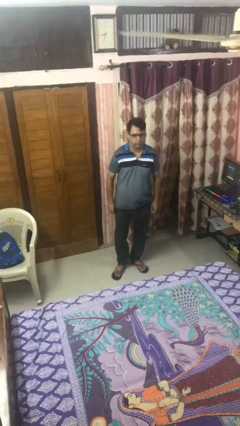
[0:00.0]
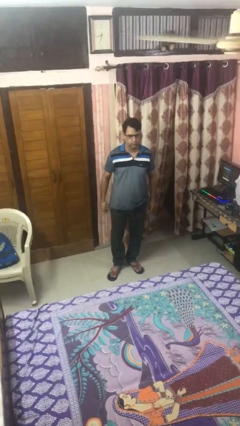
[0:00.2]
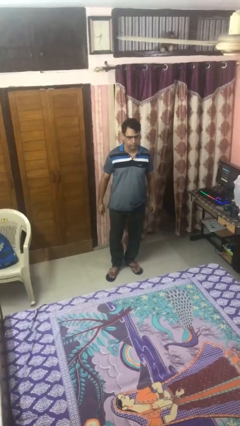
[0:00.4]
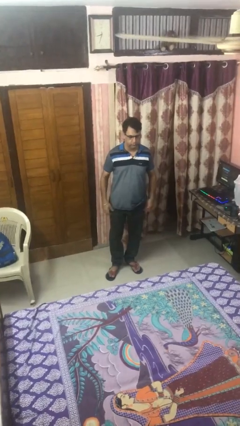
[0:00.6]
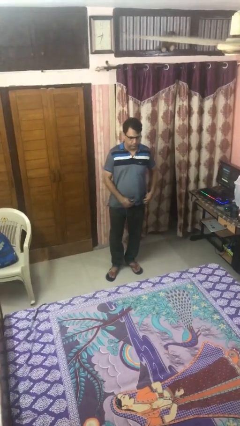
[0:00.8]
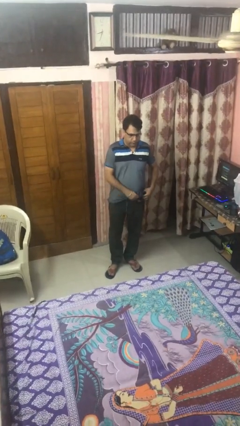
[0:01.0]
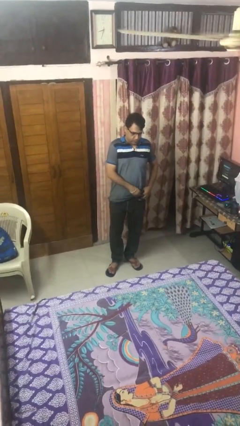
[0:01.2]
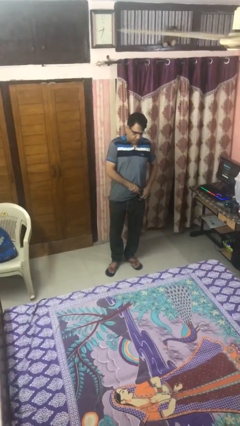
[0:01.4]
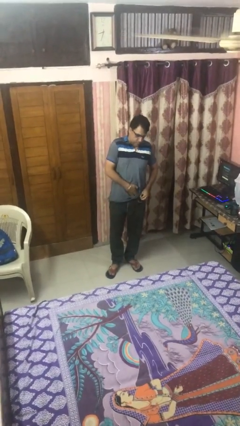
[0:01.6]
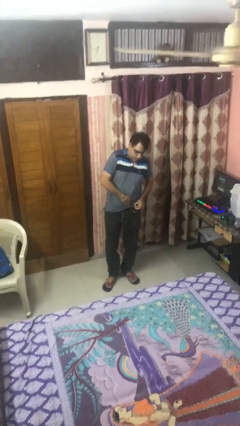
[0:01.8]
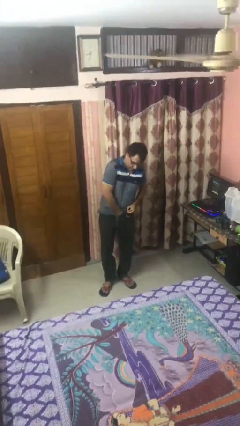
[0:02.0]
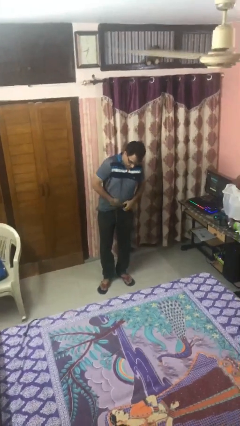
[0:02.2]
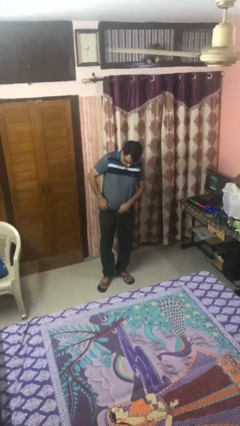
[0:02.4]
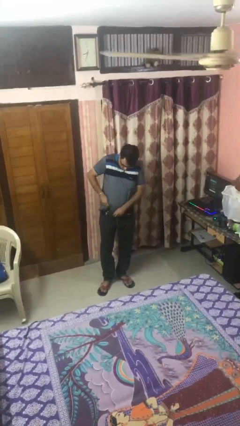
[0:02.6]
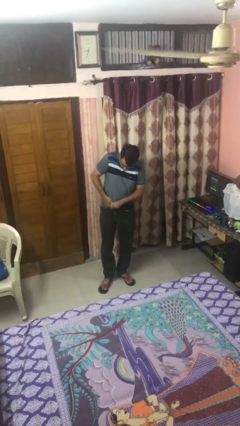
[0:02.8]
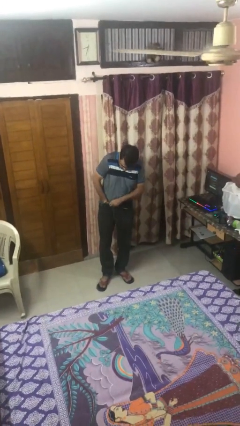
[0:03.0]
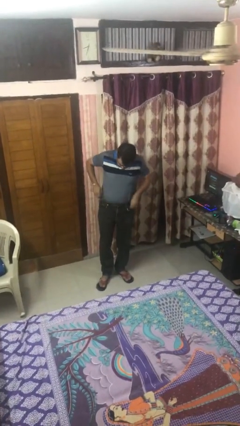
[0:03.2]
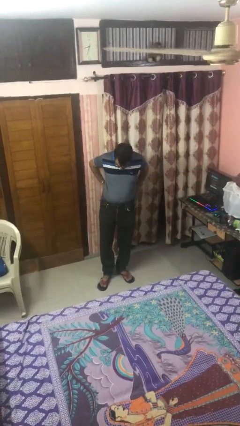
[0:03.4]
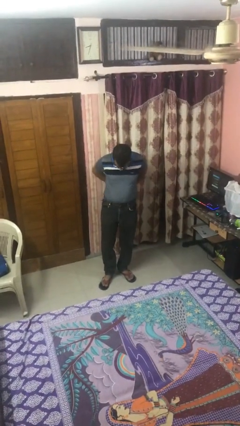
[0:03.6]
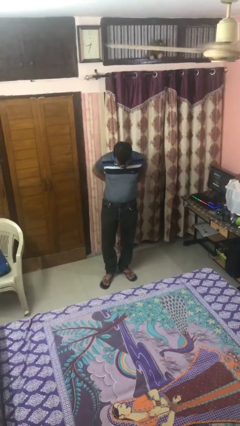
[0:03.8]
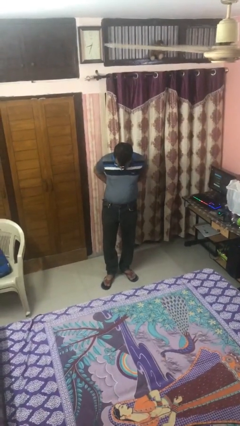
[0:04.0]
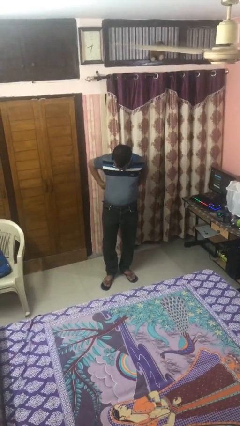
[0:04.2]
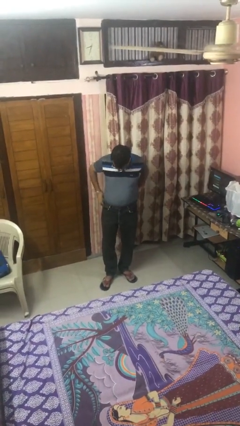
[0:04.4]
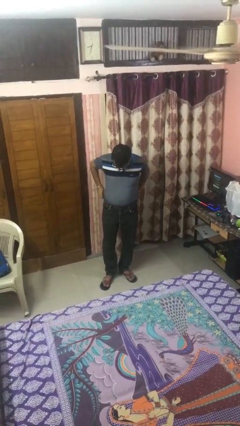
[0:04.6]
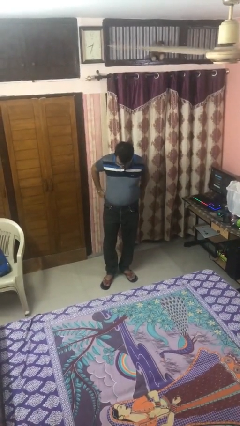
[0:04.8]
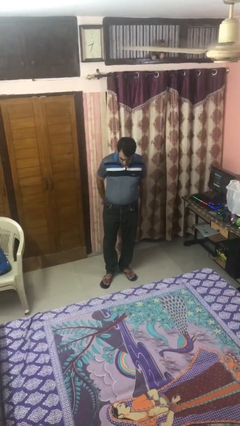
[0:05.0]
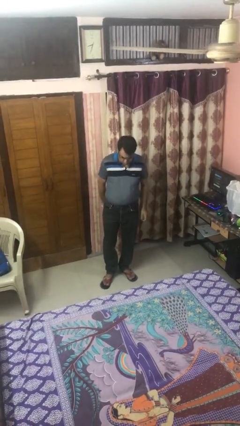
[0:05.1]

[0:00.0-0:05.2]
person tucks in shirt

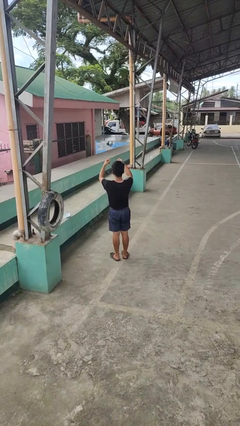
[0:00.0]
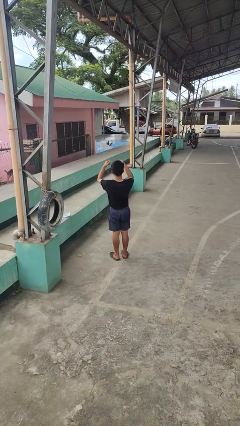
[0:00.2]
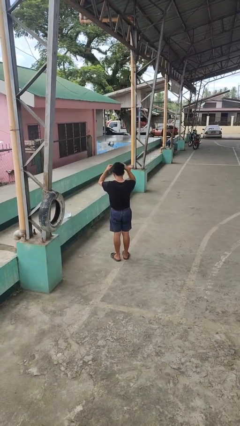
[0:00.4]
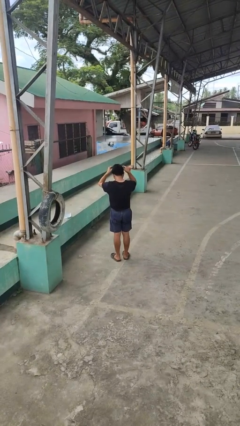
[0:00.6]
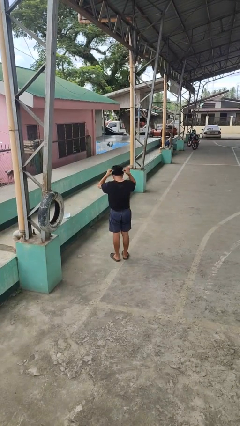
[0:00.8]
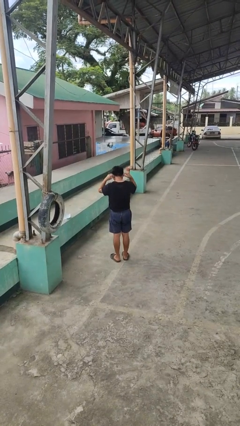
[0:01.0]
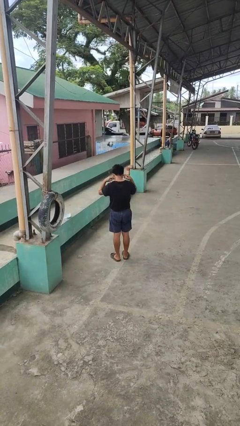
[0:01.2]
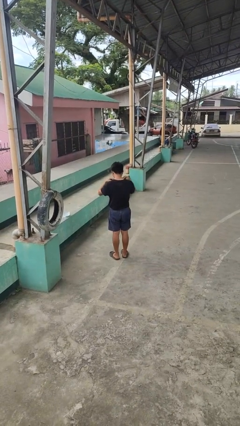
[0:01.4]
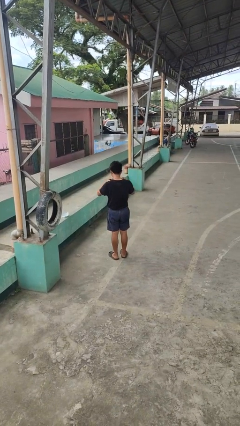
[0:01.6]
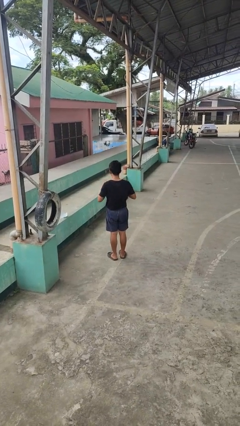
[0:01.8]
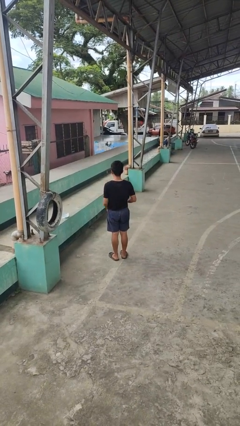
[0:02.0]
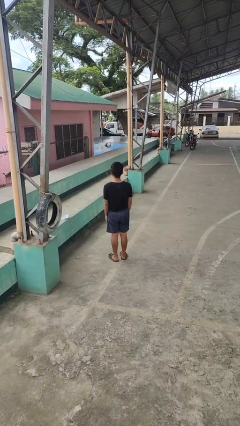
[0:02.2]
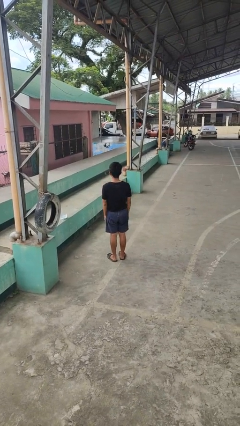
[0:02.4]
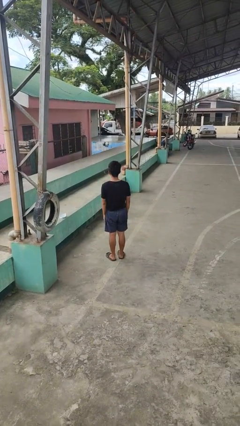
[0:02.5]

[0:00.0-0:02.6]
person puts on necklace

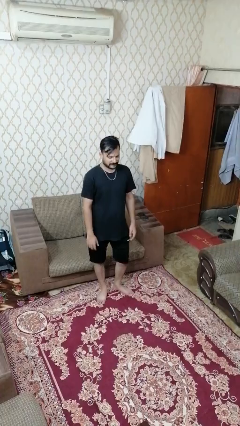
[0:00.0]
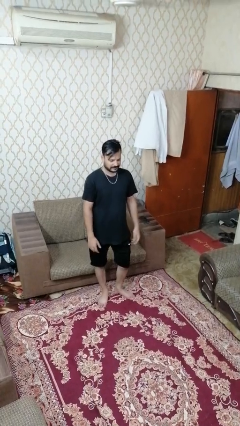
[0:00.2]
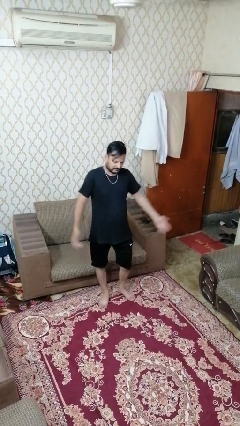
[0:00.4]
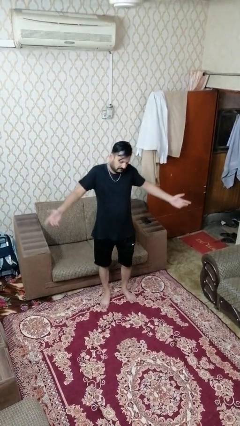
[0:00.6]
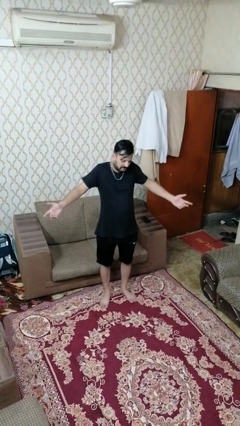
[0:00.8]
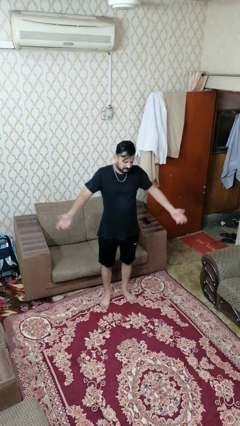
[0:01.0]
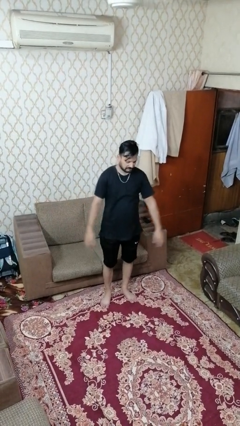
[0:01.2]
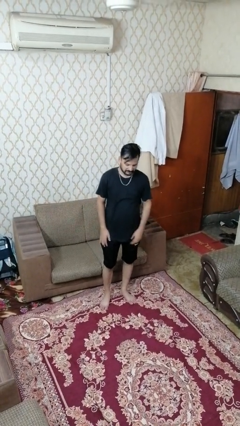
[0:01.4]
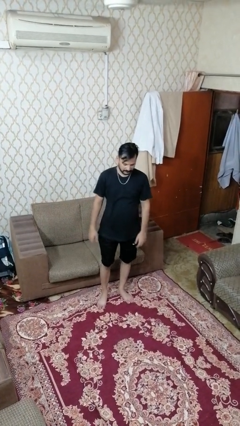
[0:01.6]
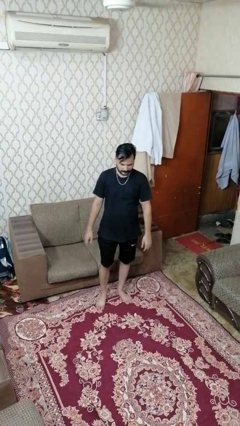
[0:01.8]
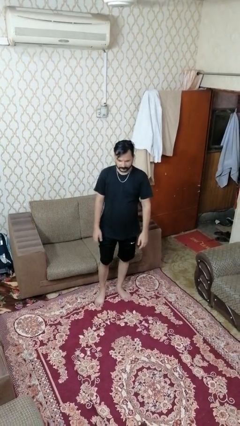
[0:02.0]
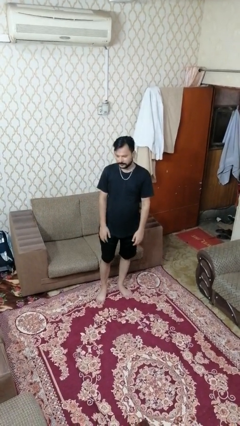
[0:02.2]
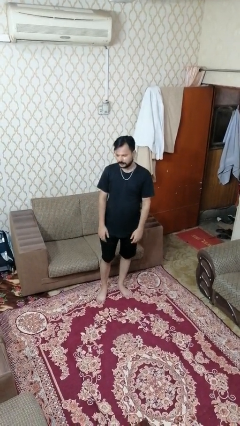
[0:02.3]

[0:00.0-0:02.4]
person shrugs

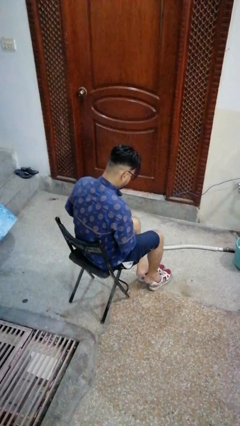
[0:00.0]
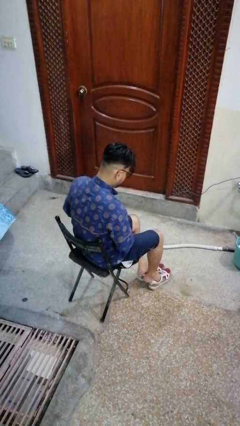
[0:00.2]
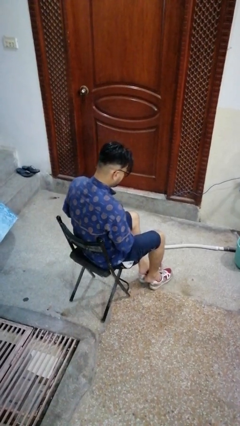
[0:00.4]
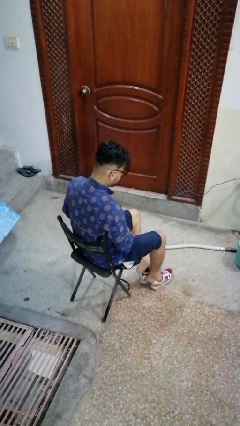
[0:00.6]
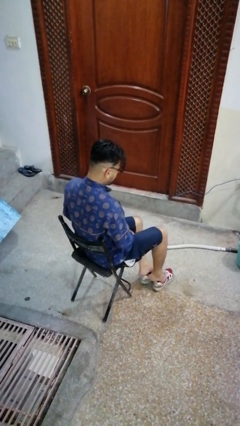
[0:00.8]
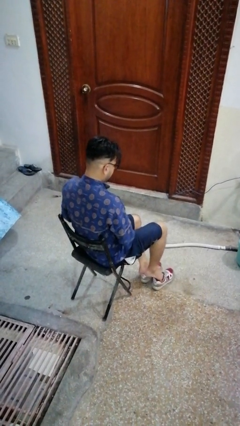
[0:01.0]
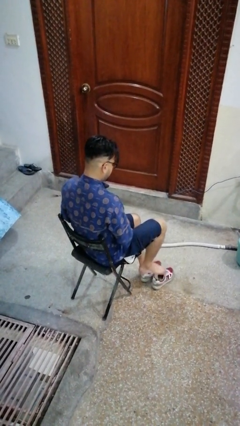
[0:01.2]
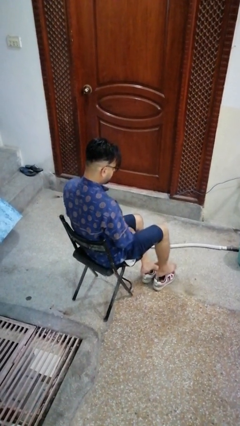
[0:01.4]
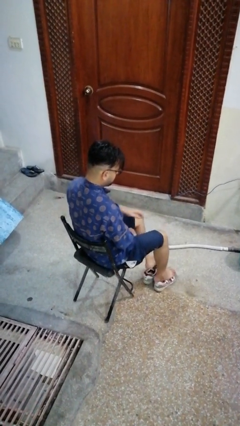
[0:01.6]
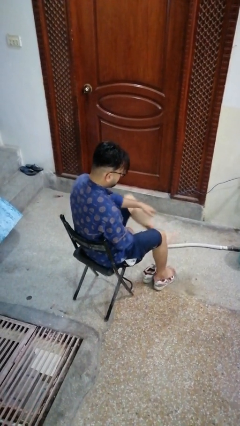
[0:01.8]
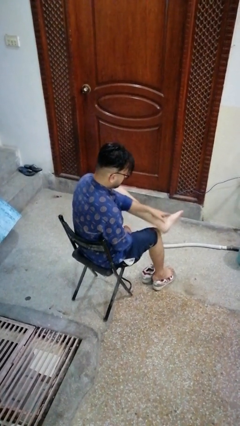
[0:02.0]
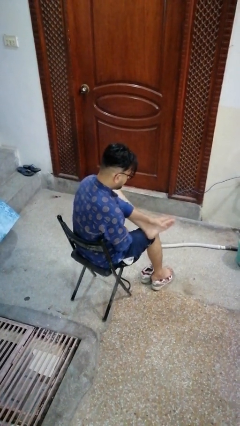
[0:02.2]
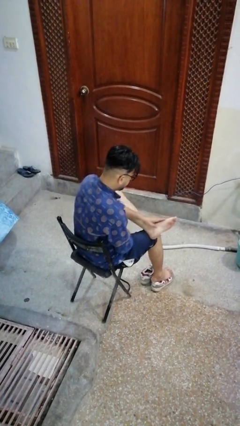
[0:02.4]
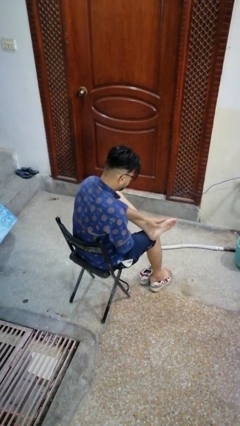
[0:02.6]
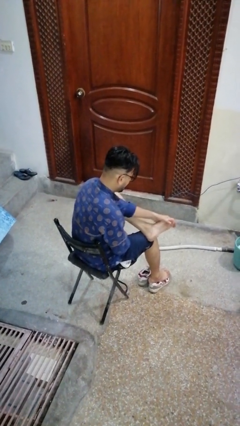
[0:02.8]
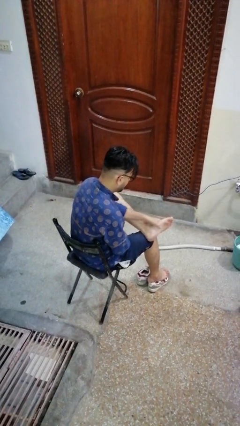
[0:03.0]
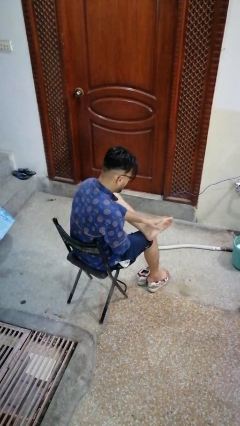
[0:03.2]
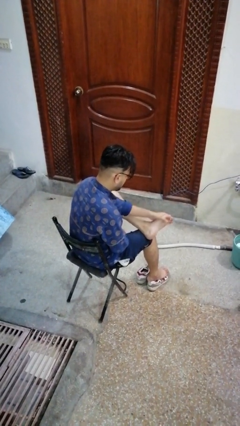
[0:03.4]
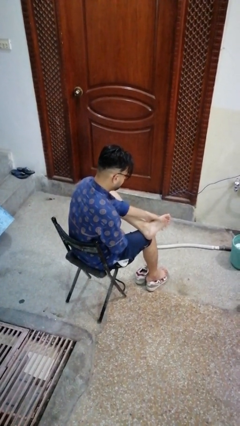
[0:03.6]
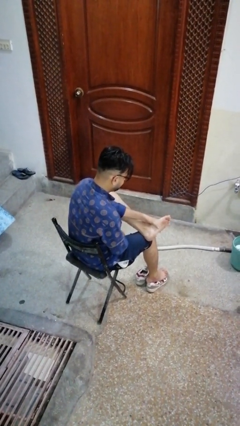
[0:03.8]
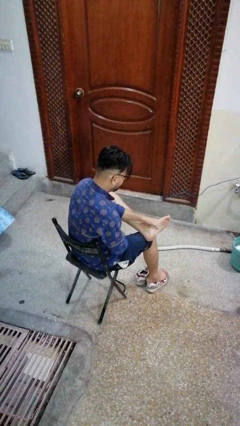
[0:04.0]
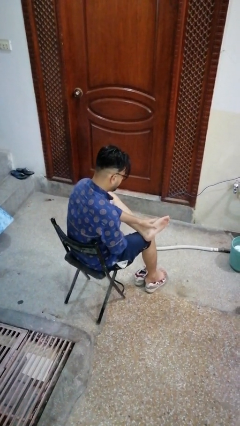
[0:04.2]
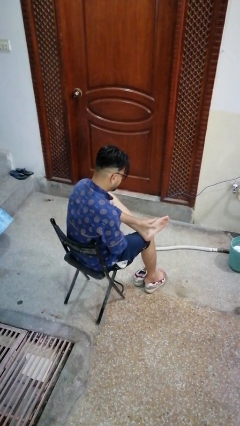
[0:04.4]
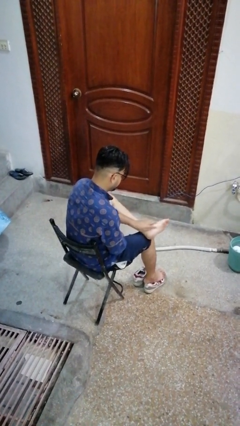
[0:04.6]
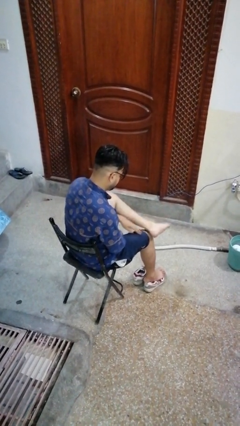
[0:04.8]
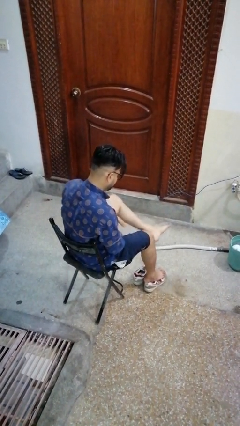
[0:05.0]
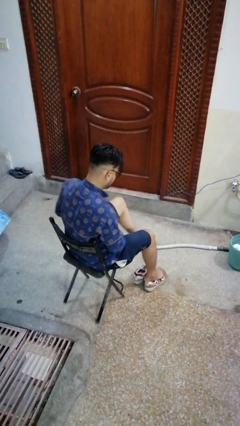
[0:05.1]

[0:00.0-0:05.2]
person rubs foot

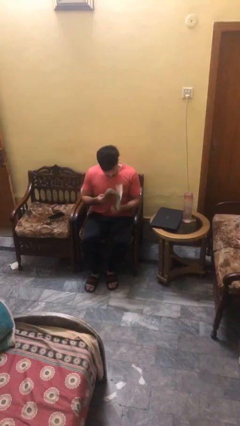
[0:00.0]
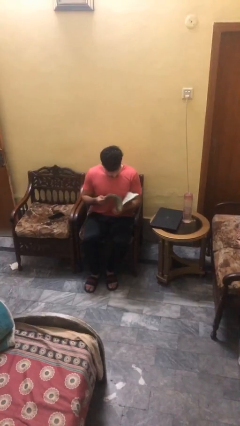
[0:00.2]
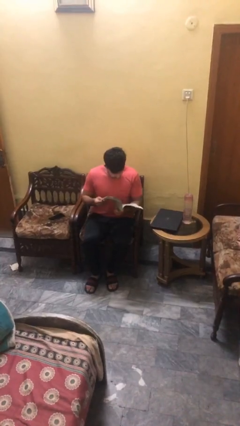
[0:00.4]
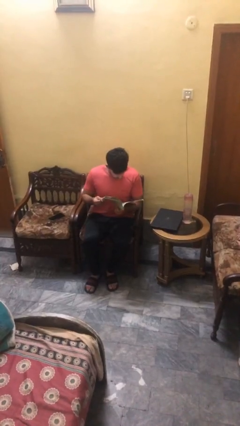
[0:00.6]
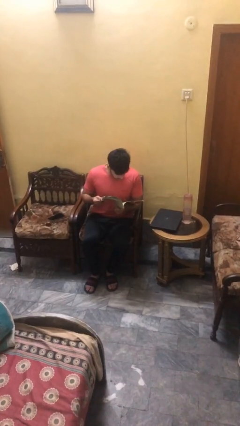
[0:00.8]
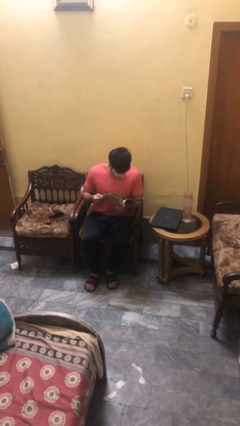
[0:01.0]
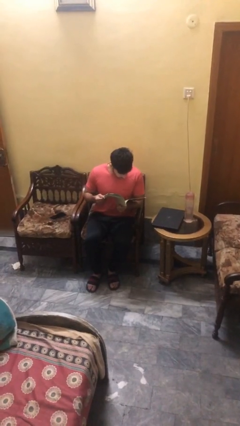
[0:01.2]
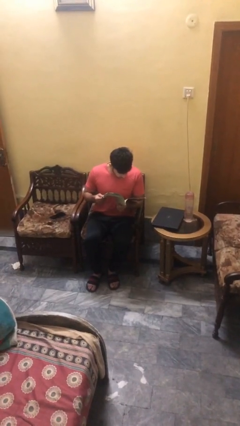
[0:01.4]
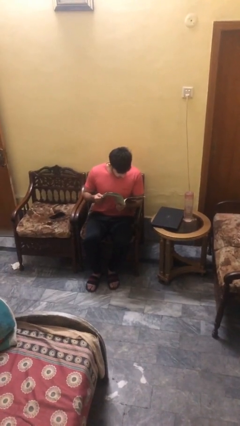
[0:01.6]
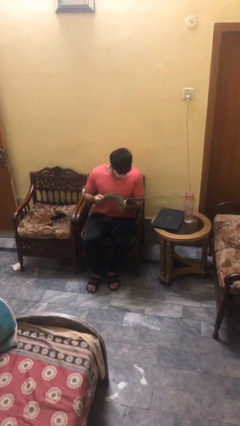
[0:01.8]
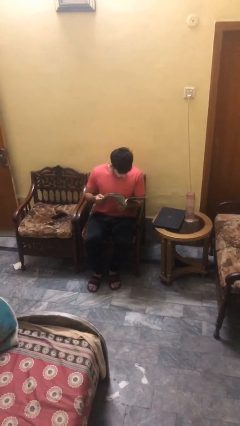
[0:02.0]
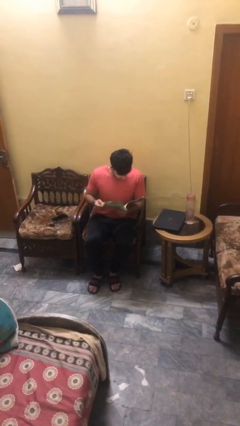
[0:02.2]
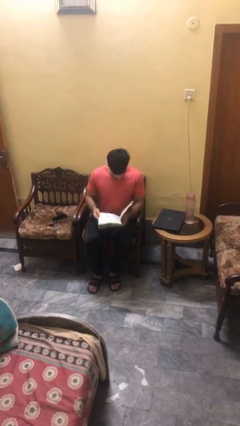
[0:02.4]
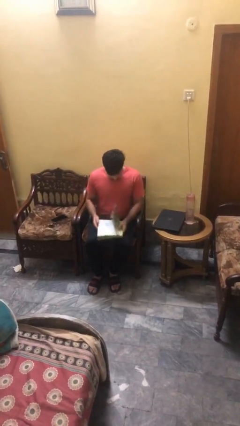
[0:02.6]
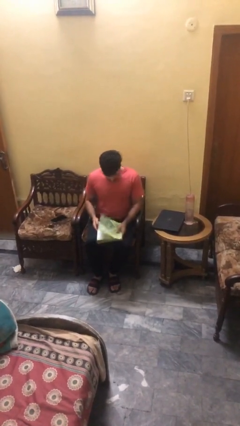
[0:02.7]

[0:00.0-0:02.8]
person reads document
